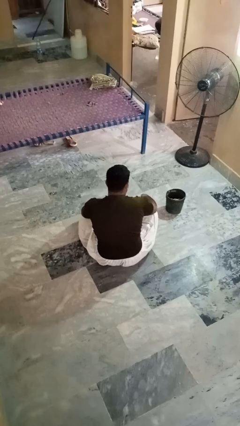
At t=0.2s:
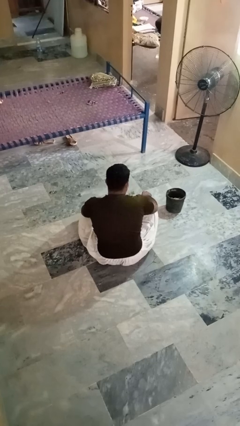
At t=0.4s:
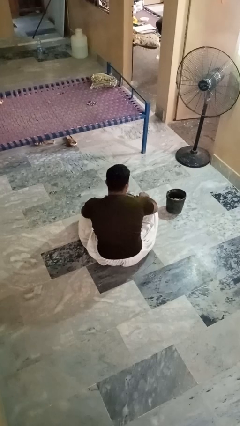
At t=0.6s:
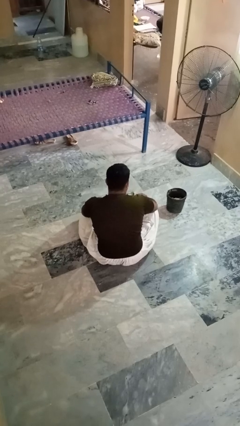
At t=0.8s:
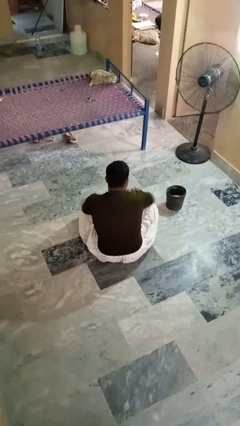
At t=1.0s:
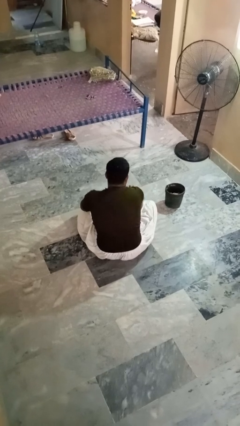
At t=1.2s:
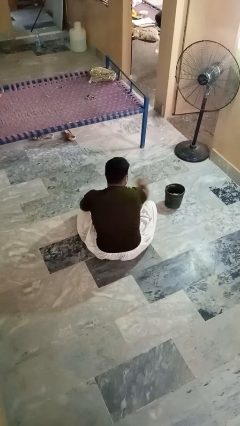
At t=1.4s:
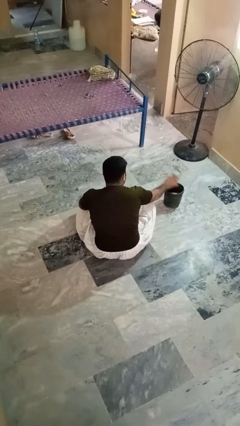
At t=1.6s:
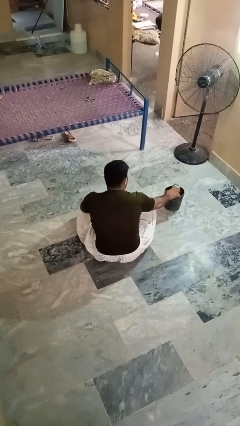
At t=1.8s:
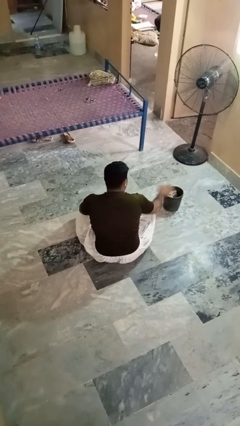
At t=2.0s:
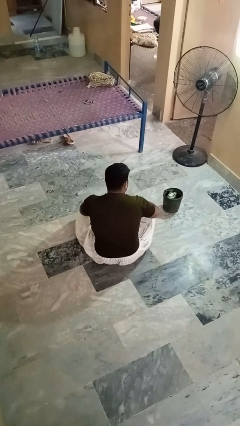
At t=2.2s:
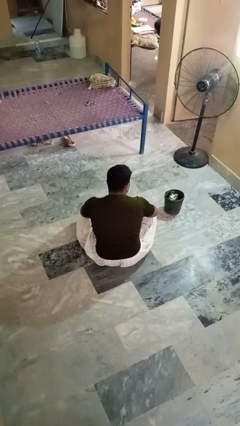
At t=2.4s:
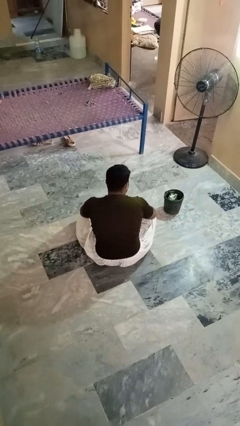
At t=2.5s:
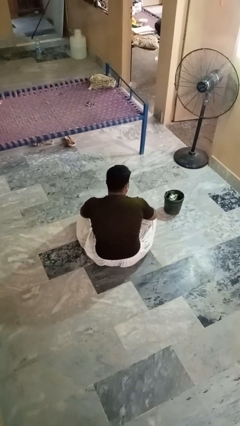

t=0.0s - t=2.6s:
person puts object into basket

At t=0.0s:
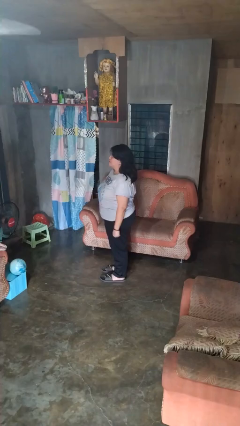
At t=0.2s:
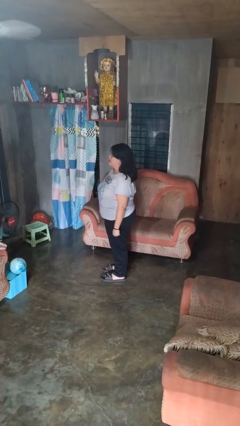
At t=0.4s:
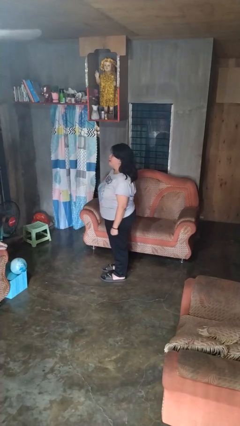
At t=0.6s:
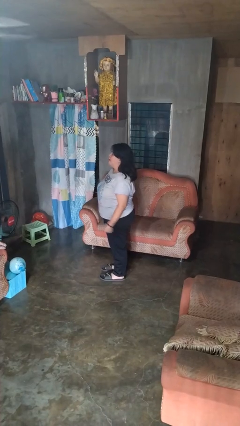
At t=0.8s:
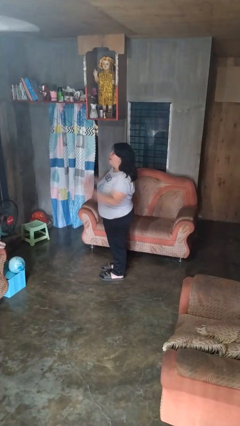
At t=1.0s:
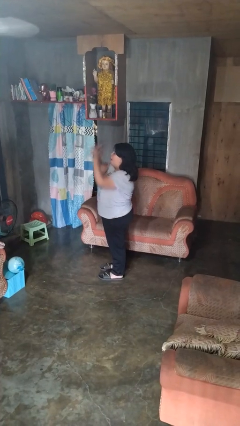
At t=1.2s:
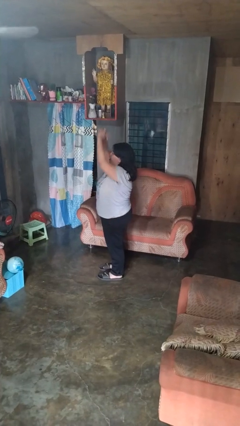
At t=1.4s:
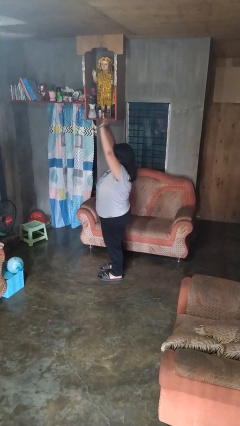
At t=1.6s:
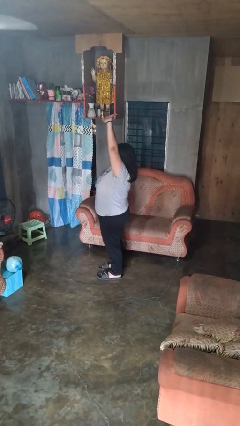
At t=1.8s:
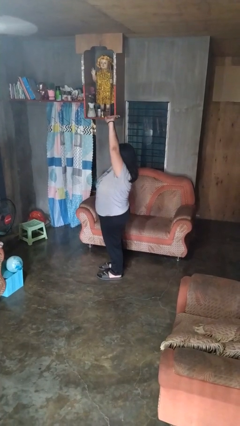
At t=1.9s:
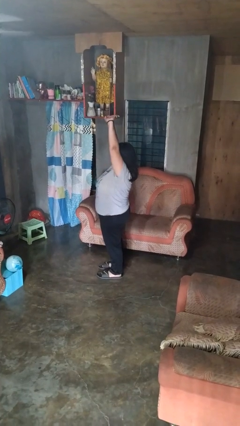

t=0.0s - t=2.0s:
person stretches arms over head

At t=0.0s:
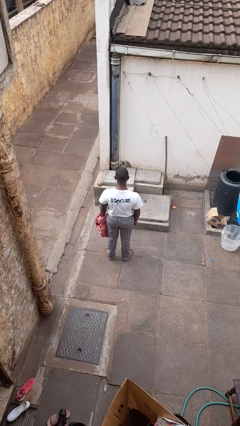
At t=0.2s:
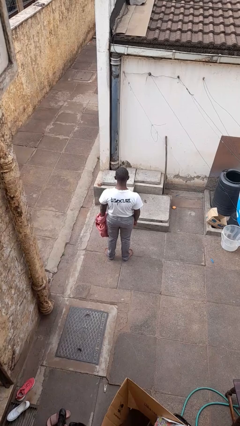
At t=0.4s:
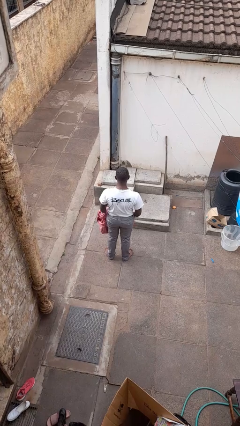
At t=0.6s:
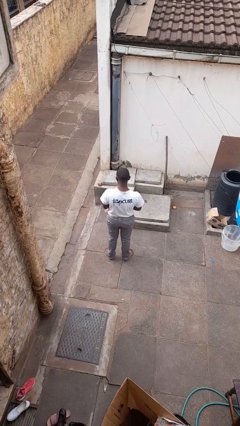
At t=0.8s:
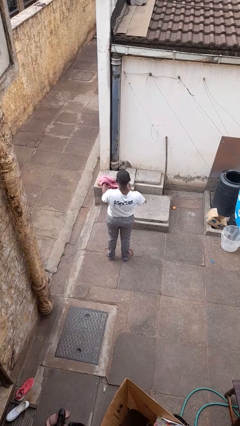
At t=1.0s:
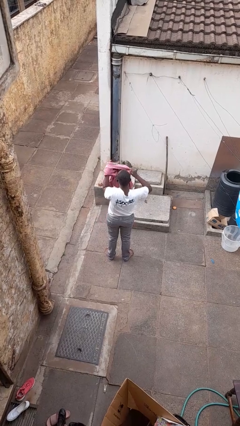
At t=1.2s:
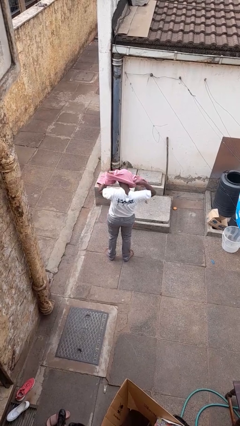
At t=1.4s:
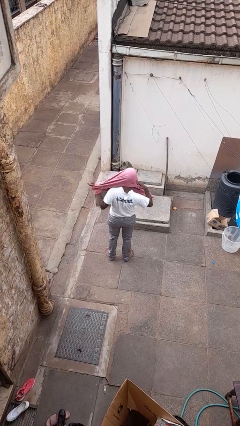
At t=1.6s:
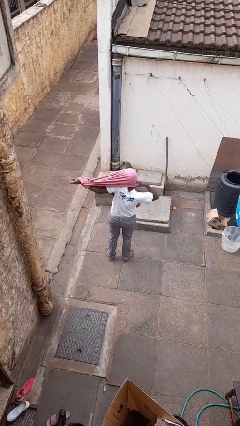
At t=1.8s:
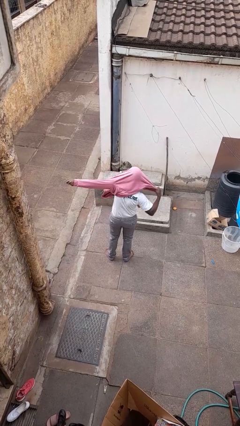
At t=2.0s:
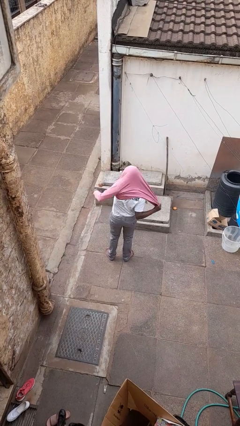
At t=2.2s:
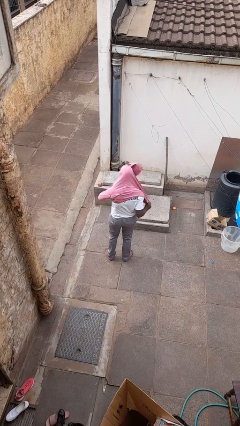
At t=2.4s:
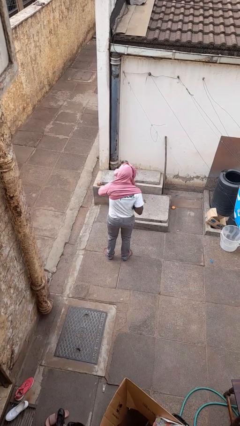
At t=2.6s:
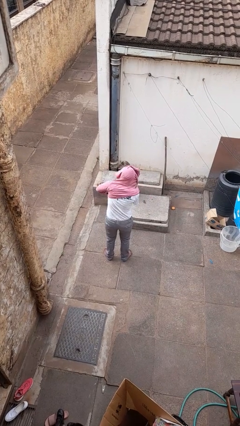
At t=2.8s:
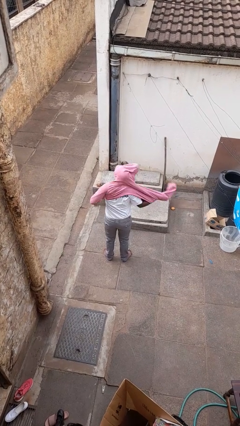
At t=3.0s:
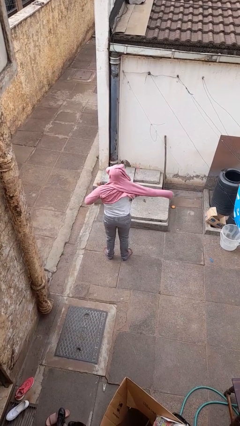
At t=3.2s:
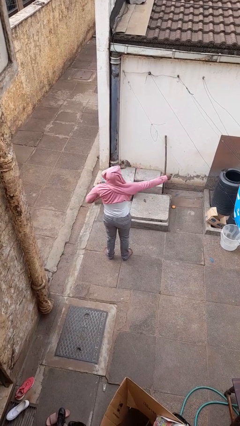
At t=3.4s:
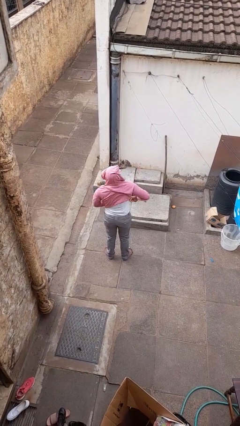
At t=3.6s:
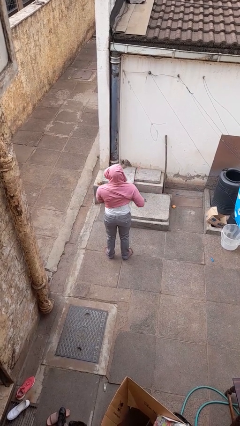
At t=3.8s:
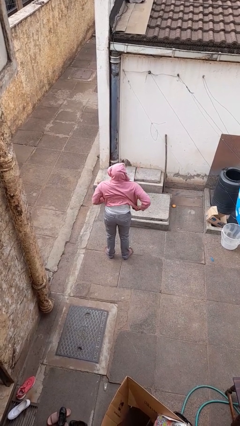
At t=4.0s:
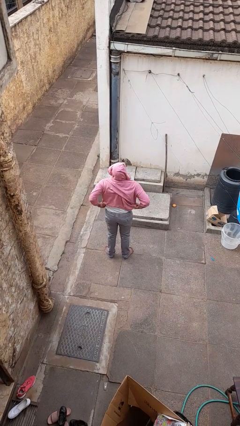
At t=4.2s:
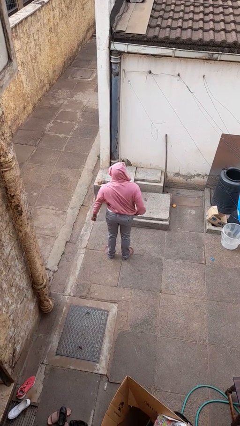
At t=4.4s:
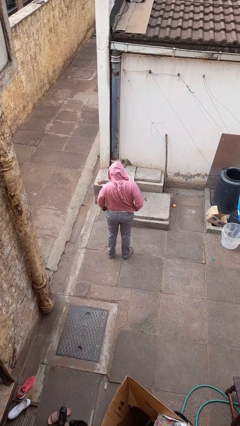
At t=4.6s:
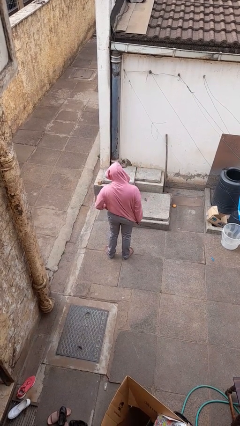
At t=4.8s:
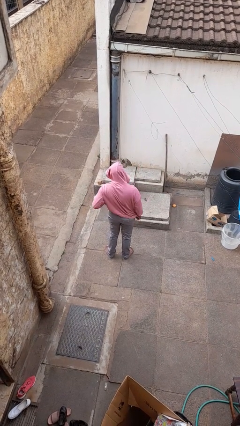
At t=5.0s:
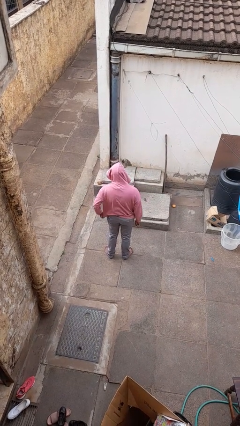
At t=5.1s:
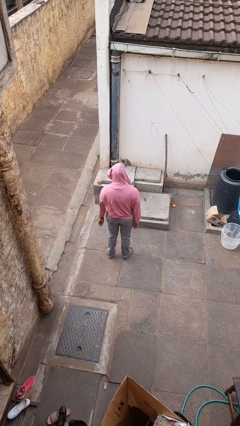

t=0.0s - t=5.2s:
person puts on hoodie

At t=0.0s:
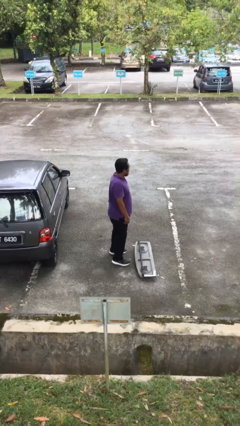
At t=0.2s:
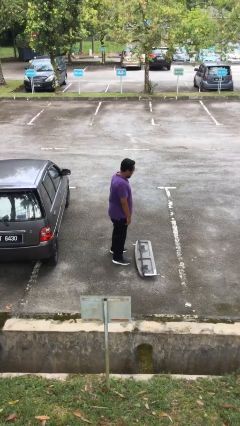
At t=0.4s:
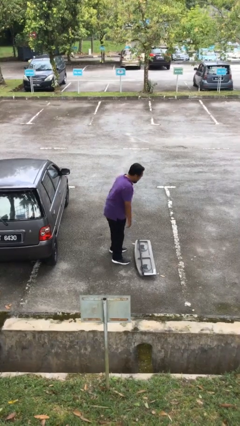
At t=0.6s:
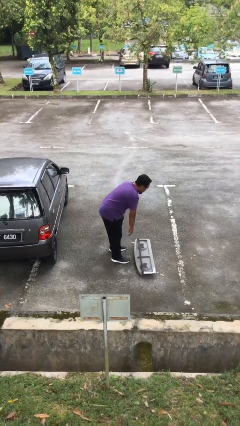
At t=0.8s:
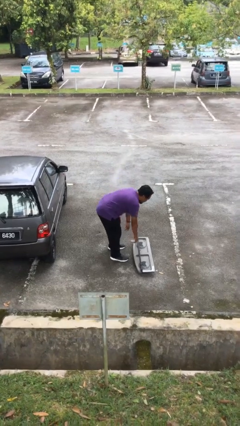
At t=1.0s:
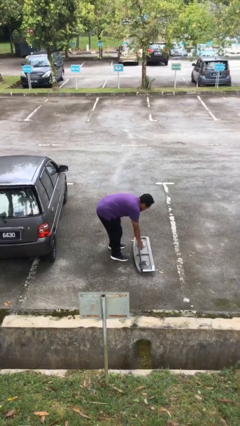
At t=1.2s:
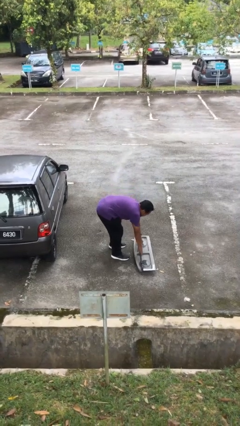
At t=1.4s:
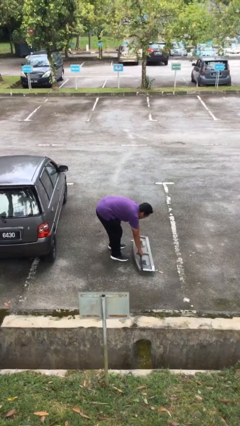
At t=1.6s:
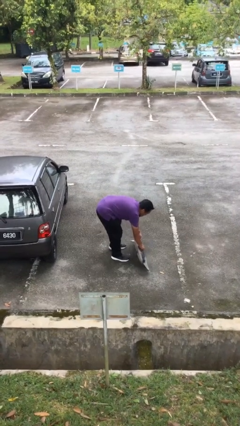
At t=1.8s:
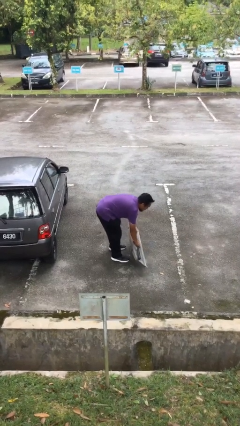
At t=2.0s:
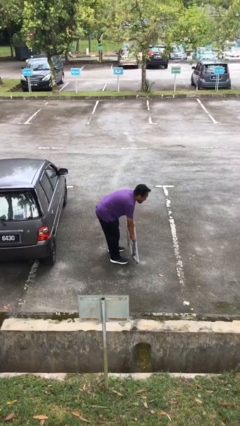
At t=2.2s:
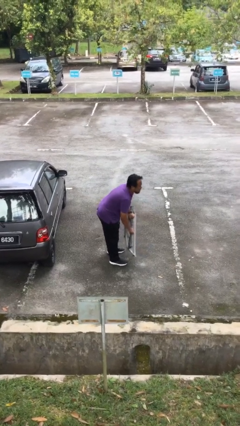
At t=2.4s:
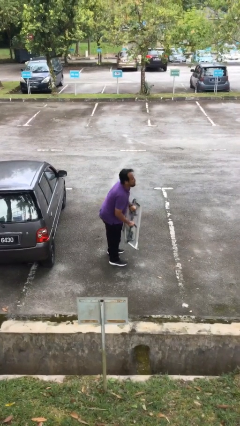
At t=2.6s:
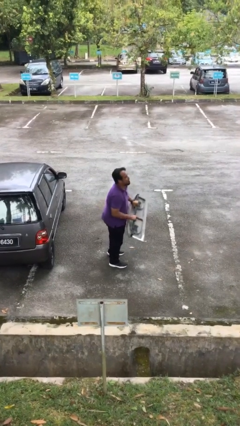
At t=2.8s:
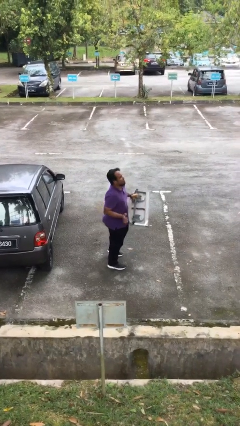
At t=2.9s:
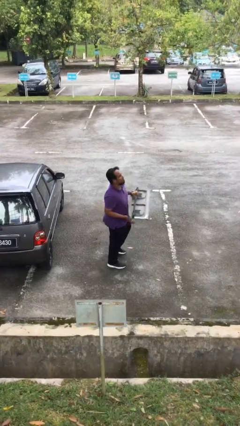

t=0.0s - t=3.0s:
person picks up object from floor

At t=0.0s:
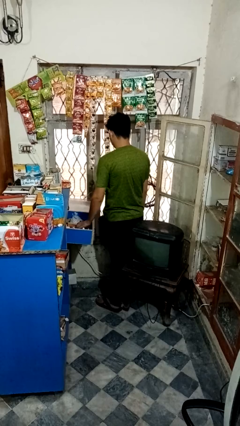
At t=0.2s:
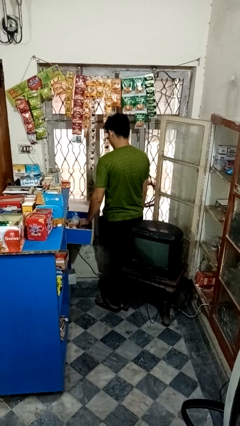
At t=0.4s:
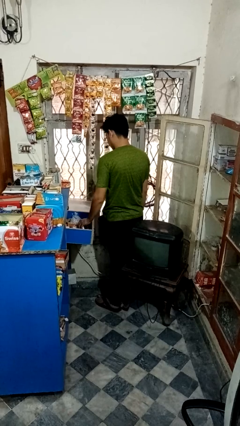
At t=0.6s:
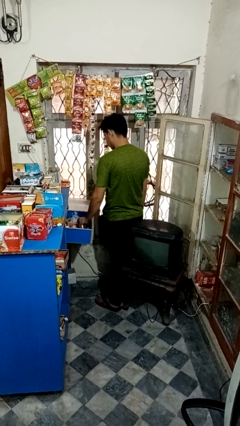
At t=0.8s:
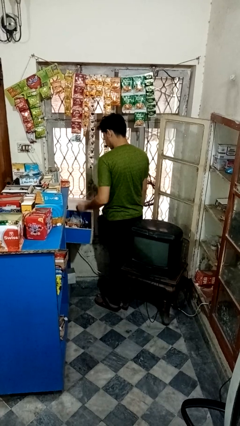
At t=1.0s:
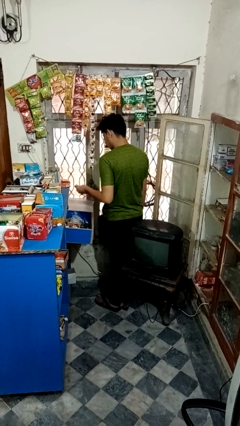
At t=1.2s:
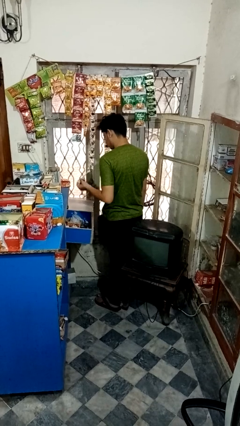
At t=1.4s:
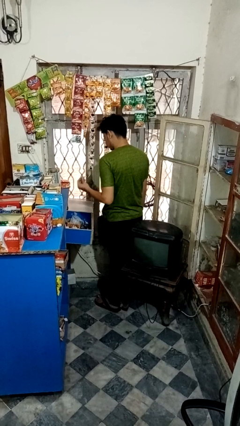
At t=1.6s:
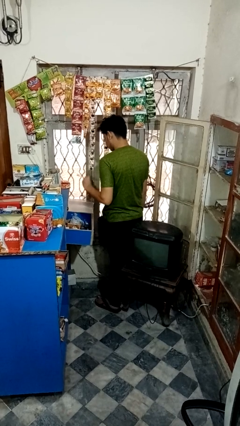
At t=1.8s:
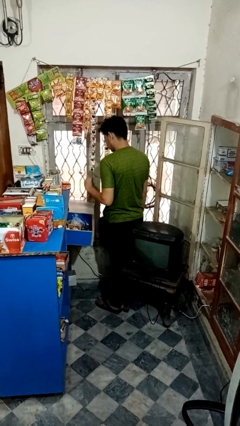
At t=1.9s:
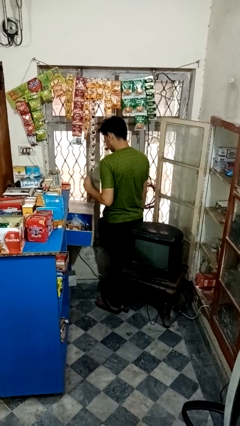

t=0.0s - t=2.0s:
person searches in kitchen drawer

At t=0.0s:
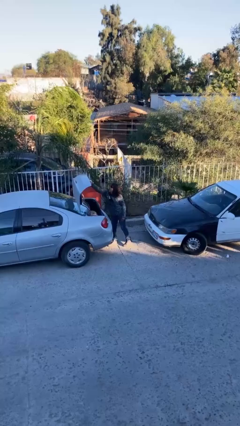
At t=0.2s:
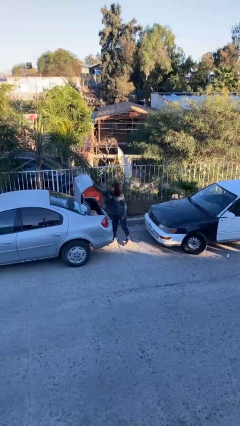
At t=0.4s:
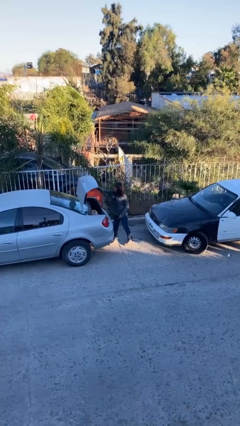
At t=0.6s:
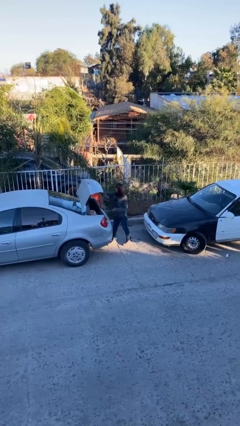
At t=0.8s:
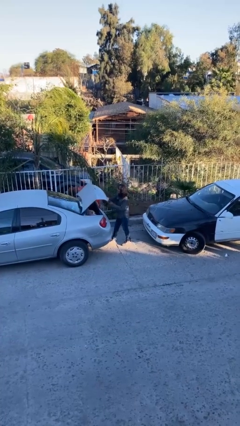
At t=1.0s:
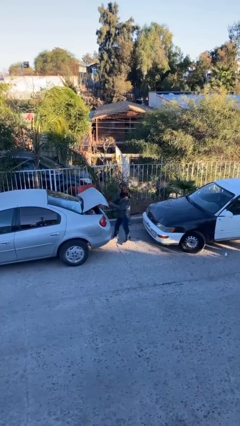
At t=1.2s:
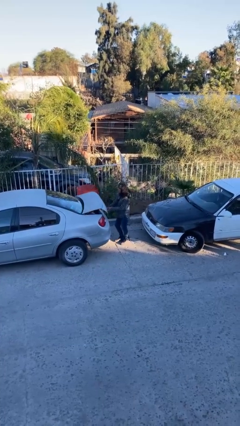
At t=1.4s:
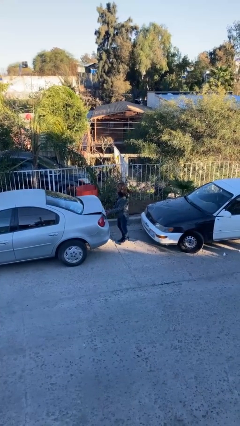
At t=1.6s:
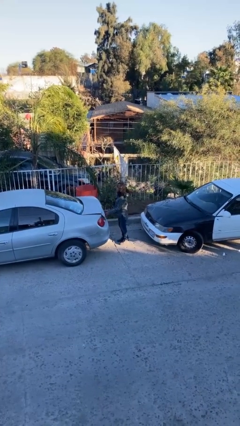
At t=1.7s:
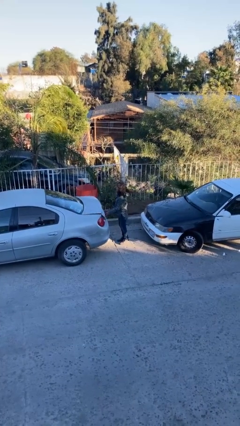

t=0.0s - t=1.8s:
person closes car trunk

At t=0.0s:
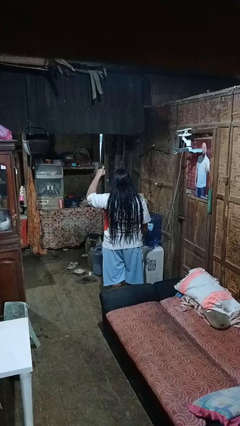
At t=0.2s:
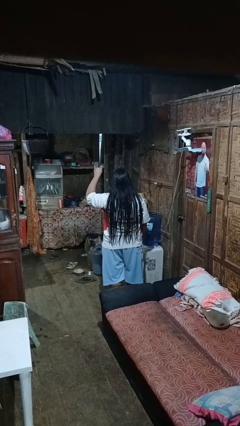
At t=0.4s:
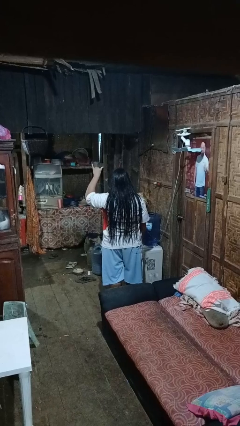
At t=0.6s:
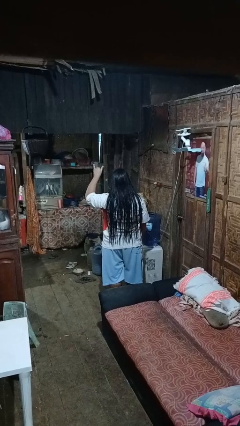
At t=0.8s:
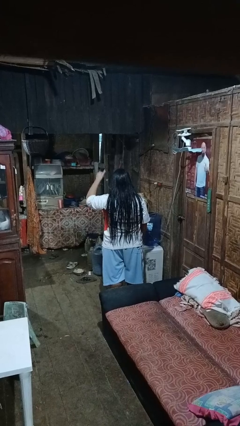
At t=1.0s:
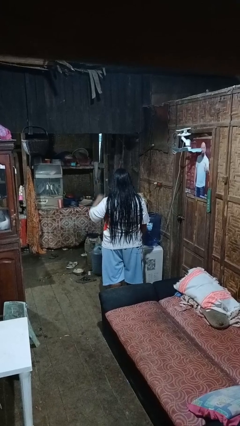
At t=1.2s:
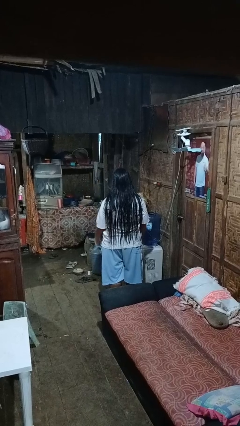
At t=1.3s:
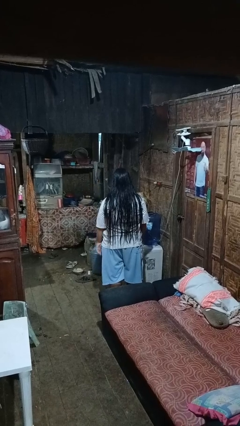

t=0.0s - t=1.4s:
person gestures hang loose
